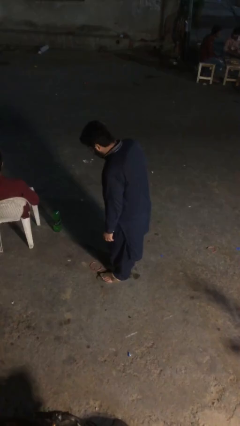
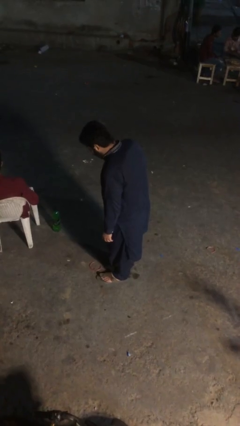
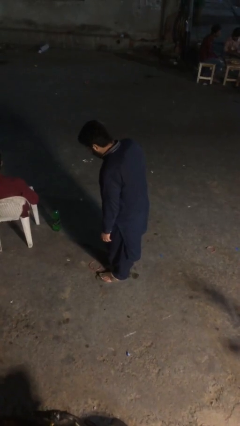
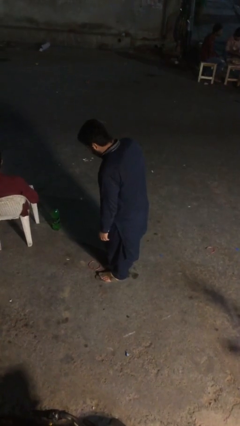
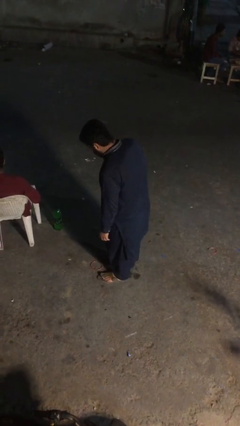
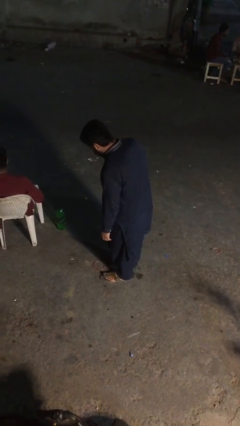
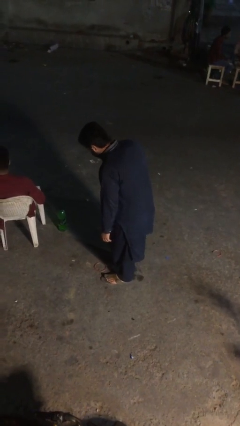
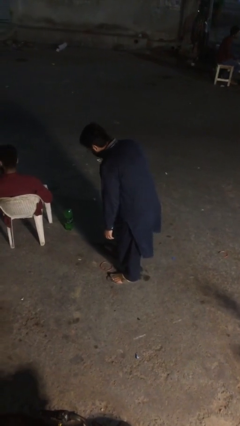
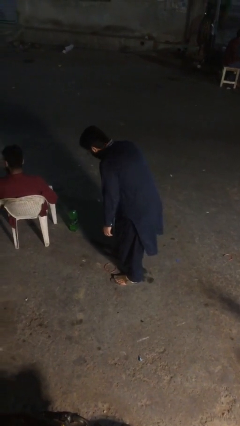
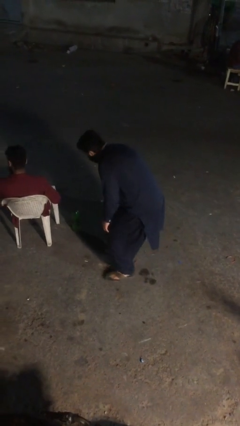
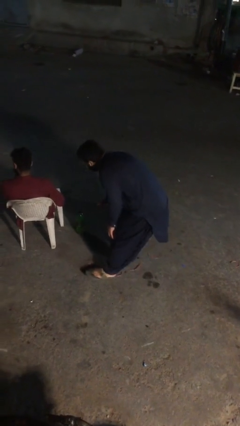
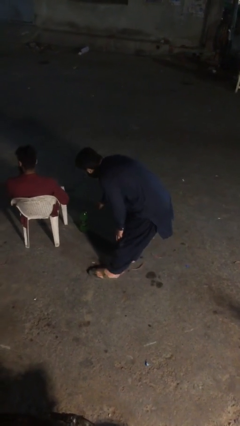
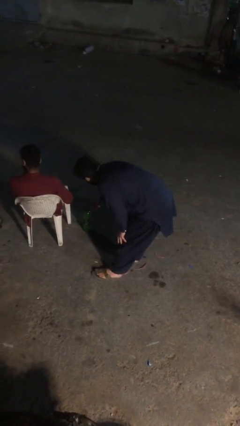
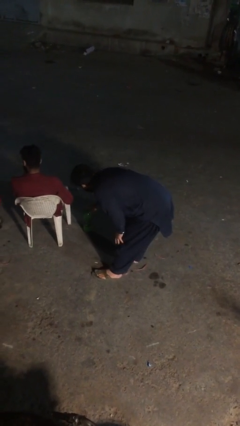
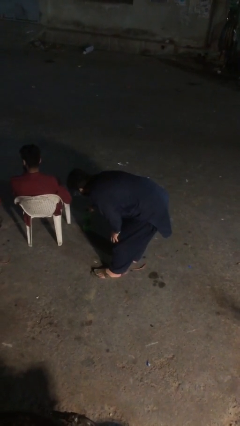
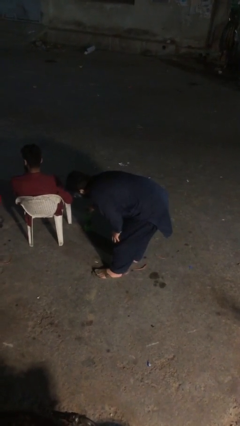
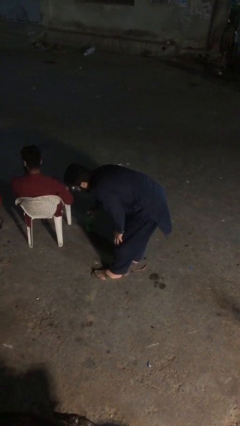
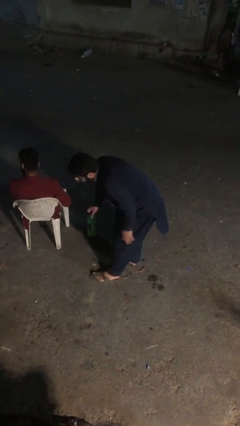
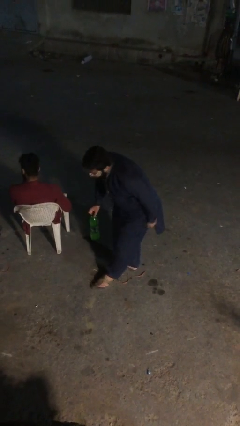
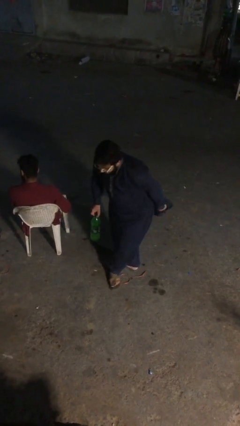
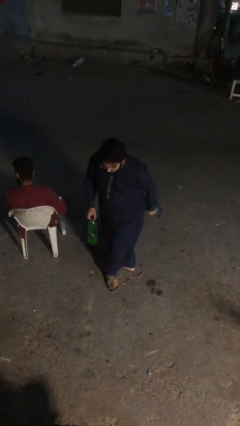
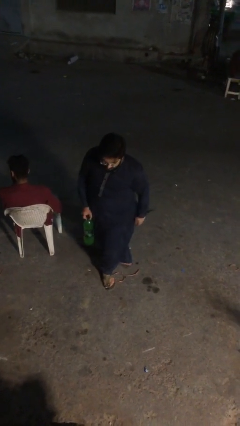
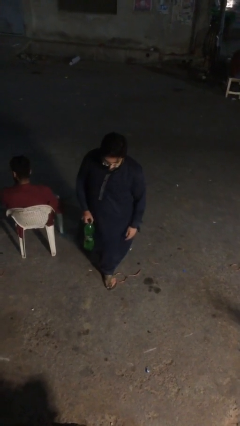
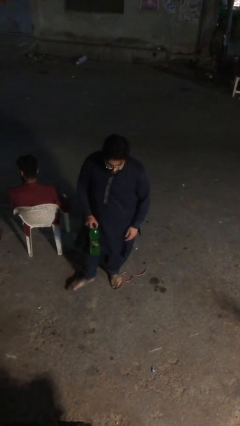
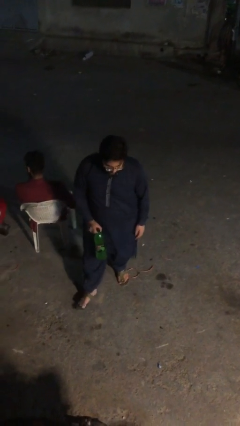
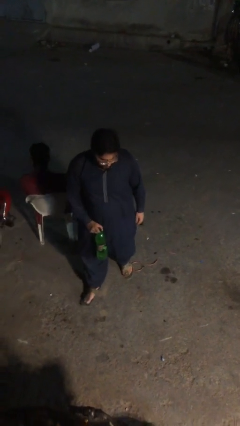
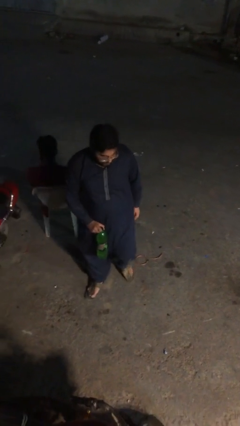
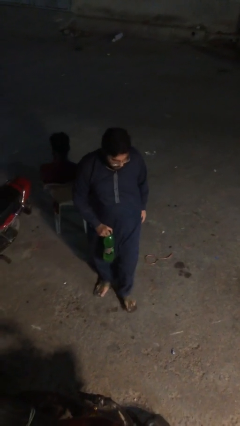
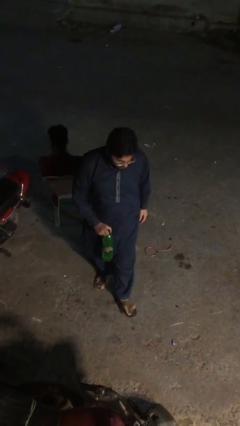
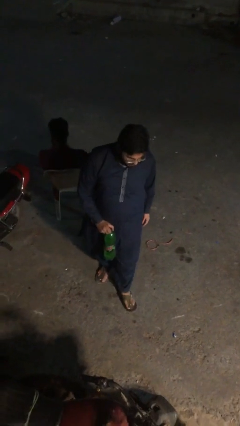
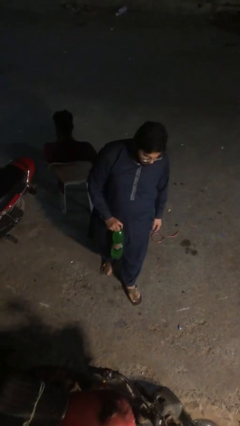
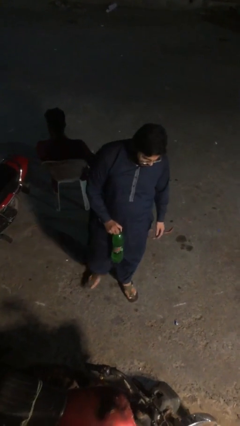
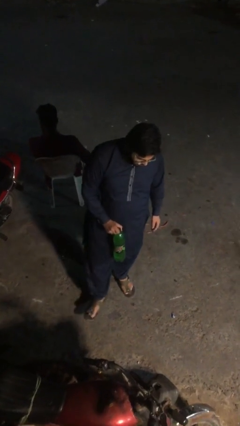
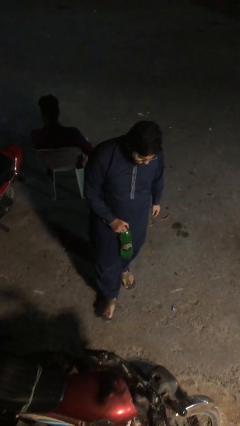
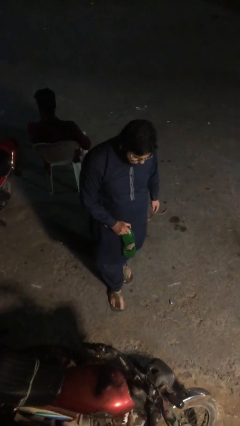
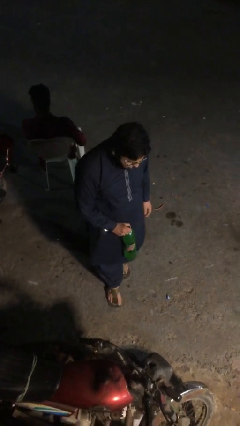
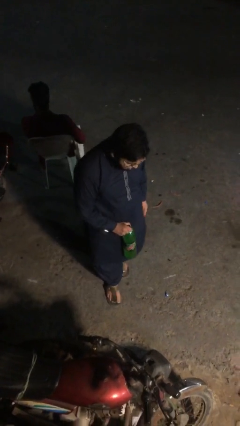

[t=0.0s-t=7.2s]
person steals object from person

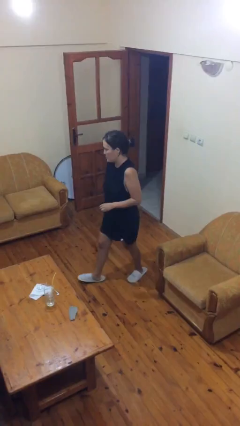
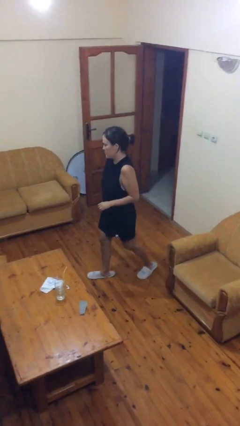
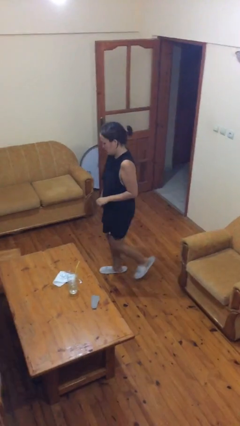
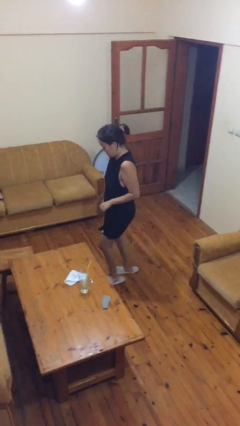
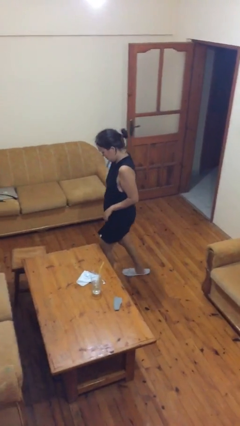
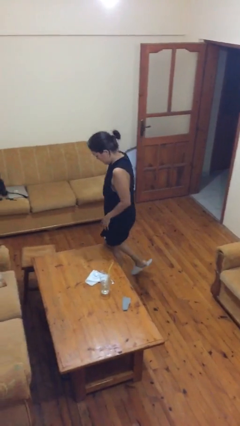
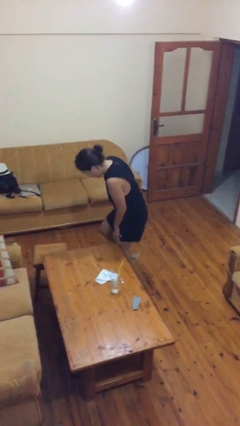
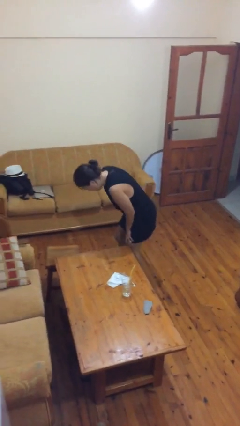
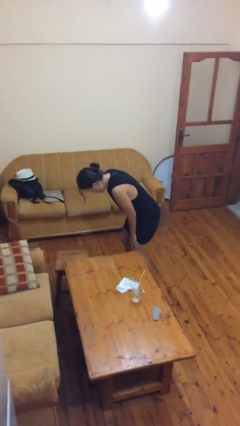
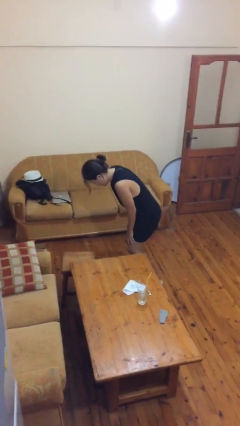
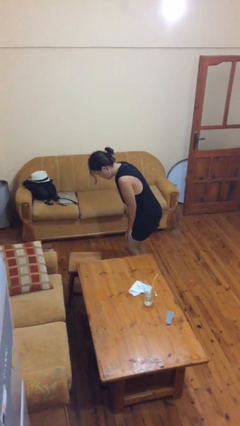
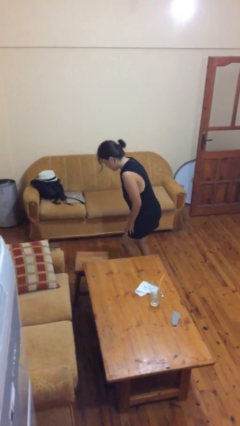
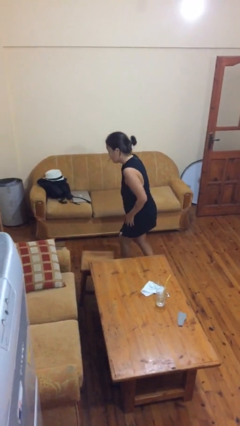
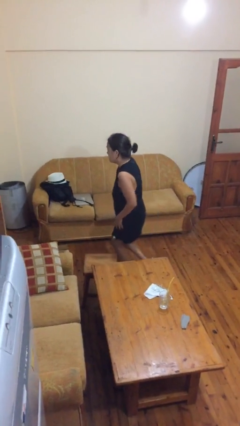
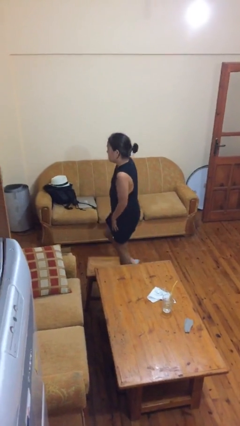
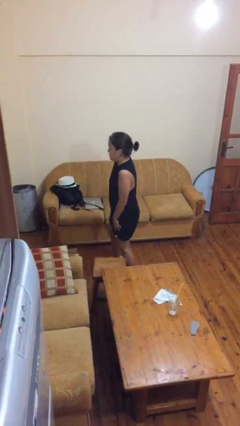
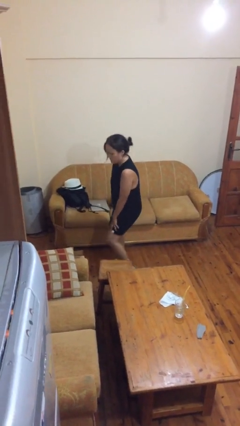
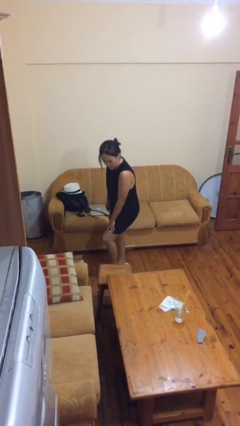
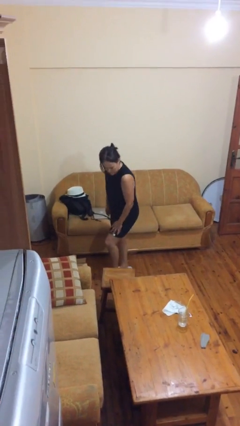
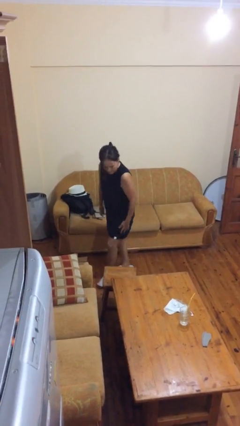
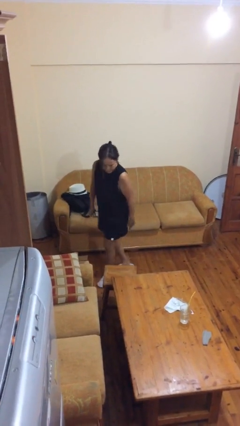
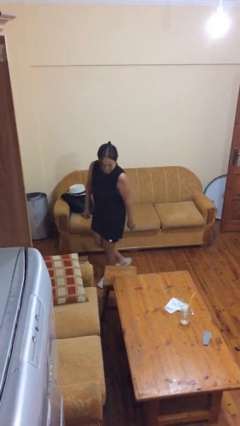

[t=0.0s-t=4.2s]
person bumps into table

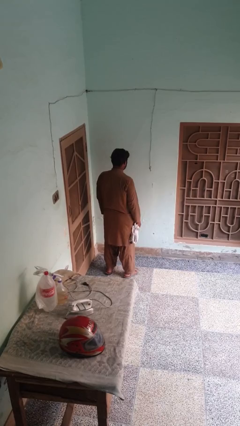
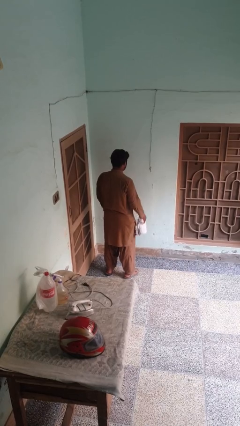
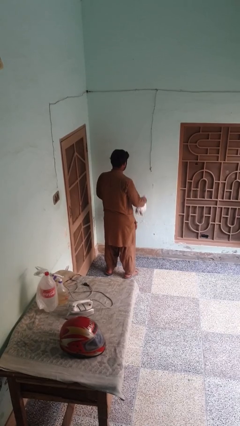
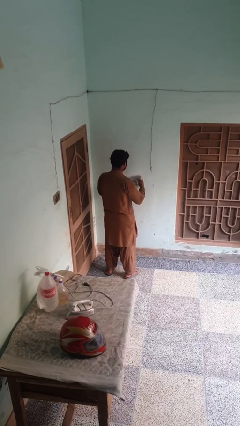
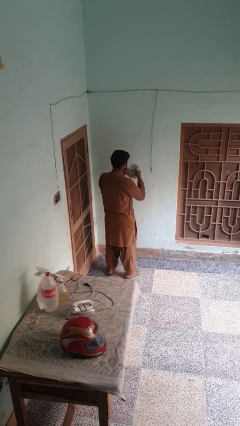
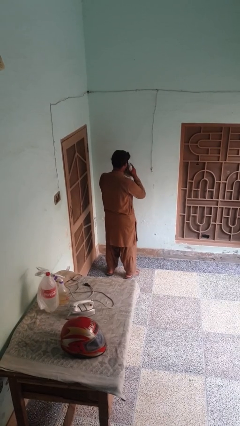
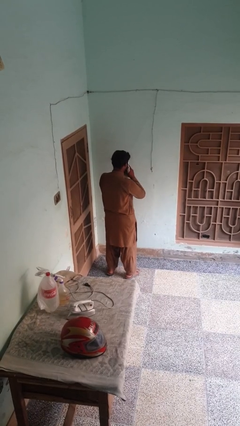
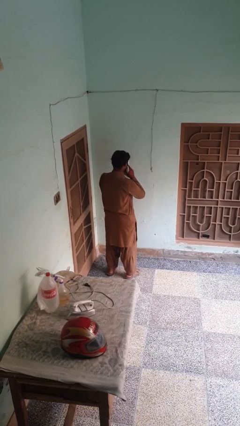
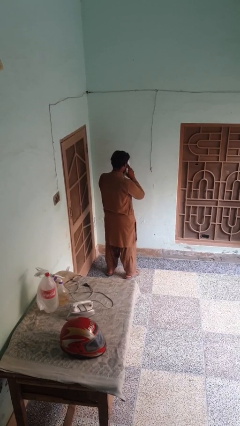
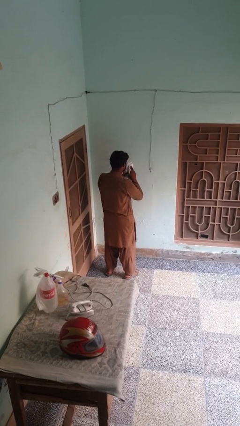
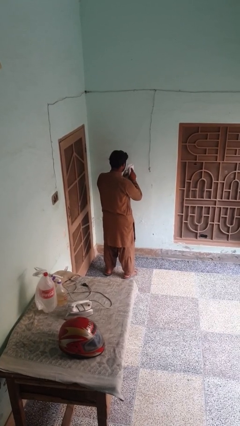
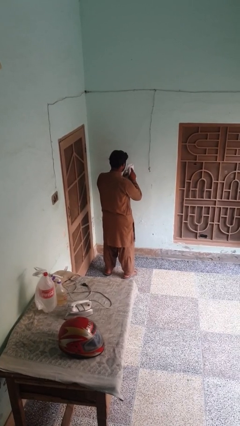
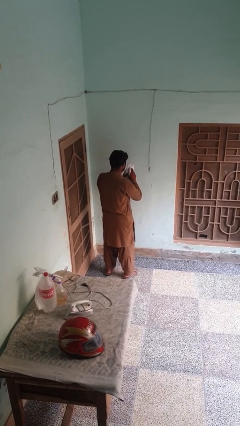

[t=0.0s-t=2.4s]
person blows nose

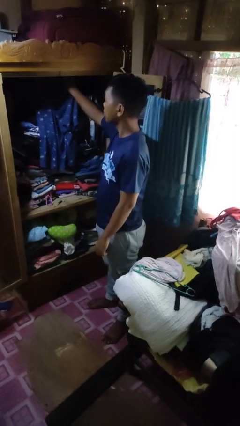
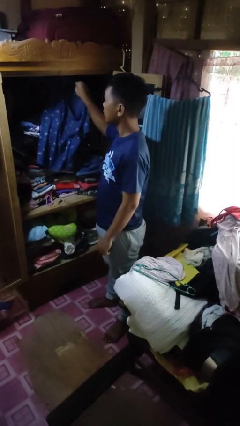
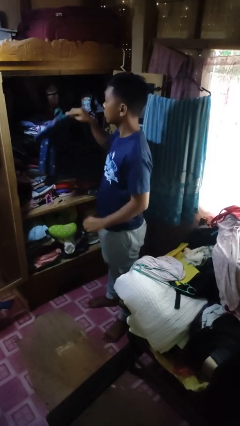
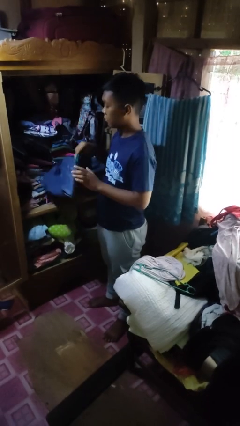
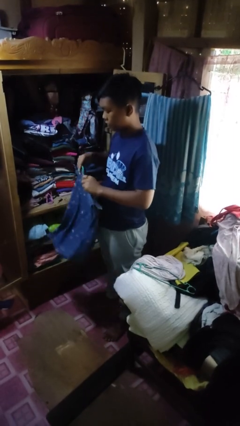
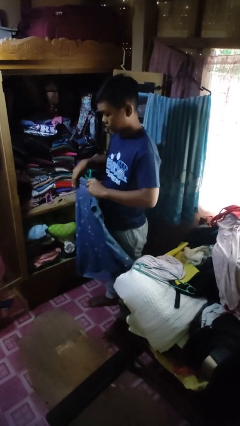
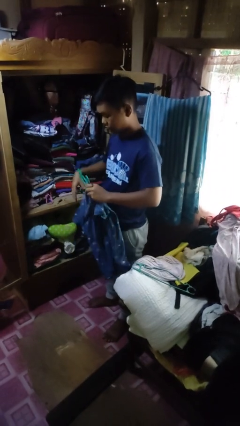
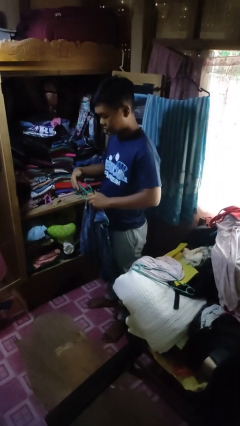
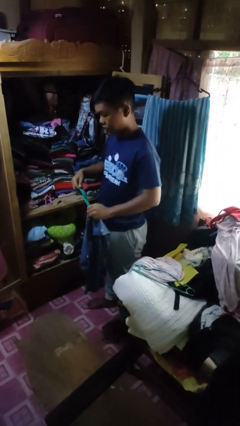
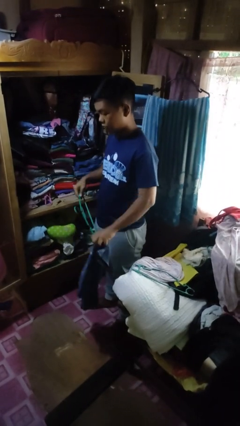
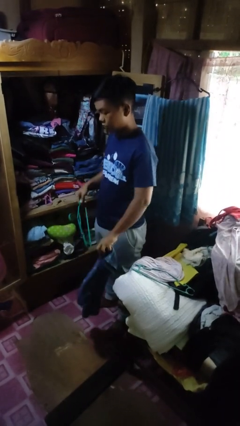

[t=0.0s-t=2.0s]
person takes clothes from closet

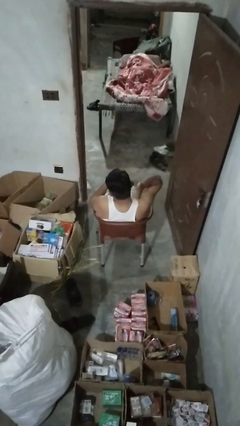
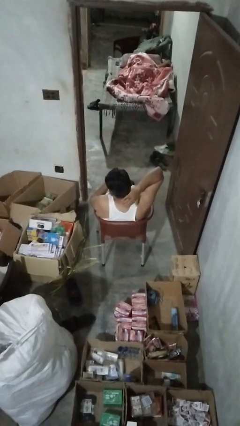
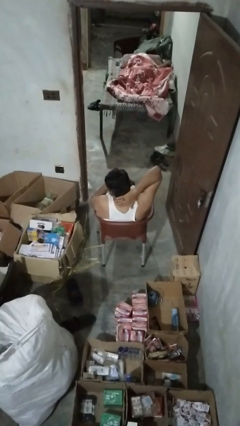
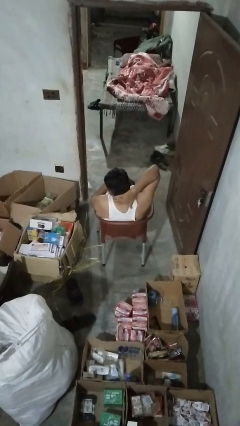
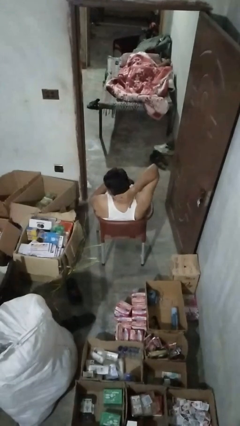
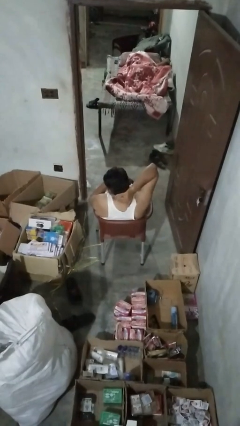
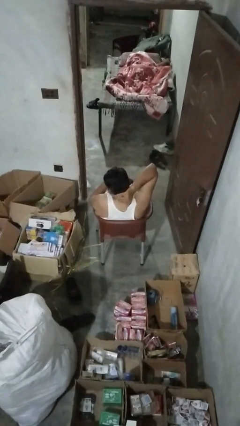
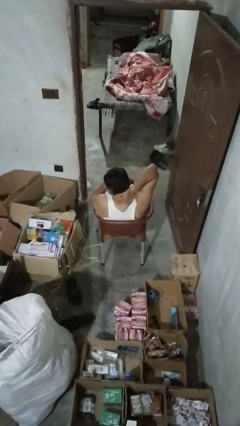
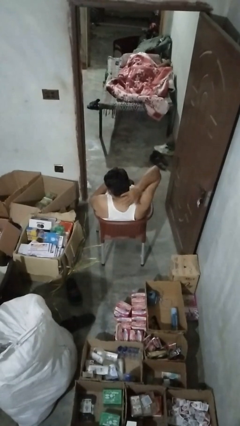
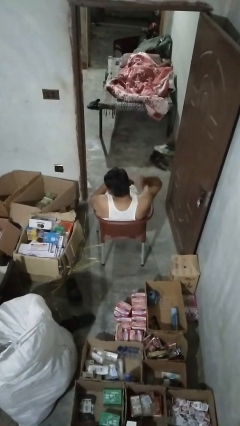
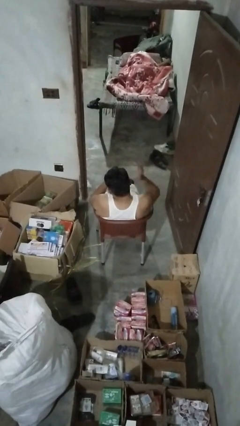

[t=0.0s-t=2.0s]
person rubs neck
